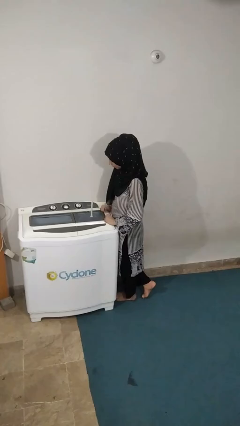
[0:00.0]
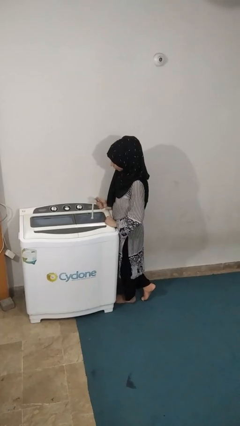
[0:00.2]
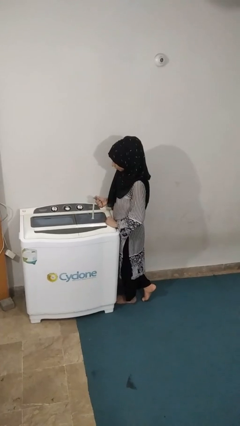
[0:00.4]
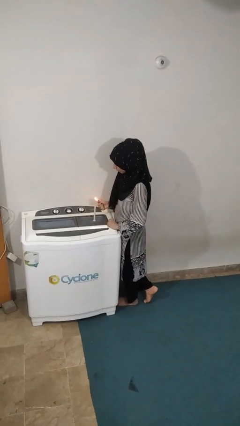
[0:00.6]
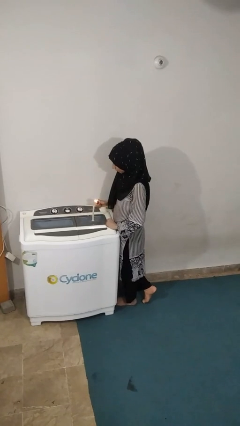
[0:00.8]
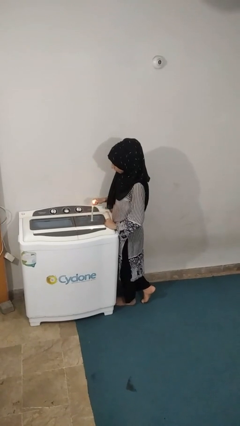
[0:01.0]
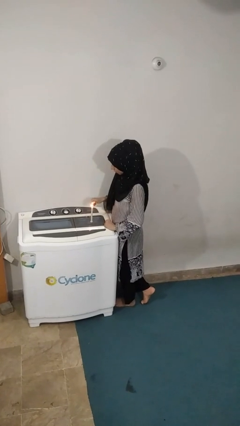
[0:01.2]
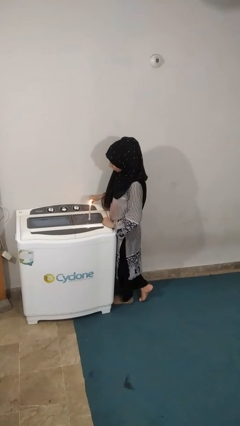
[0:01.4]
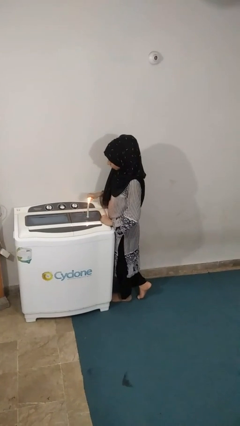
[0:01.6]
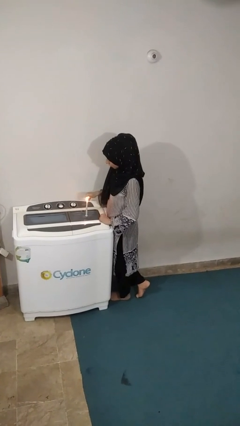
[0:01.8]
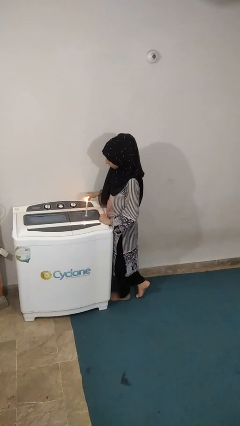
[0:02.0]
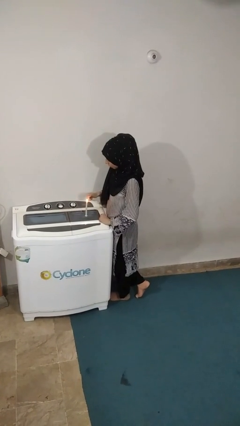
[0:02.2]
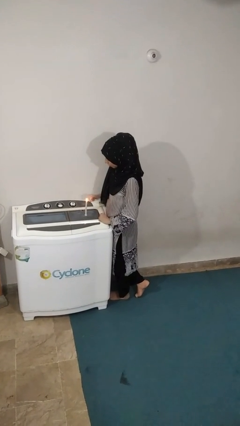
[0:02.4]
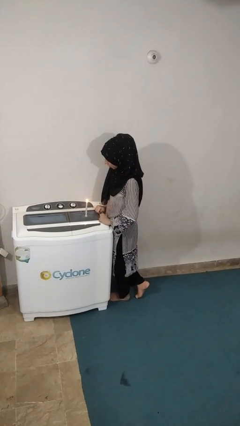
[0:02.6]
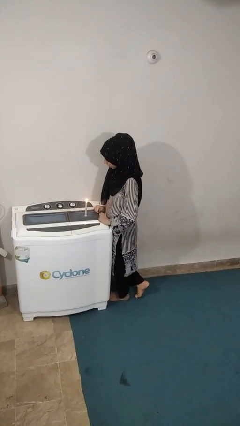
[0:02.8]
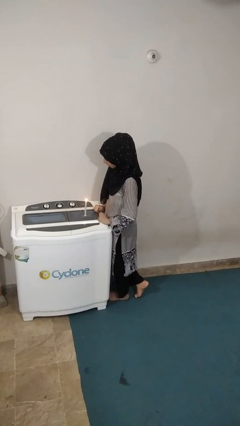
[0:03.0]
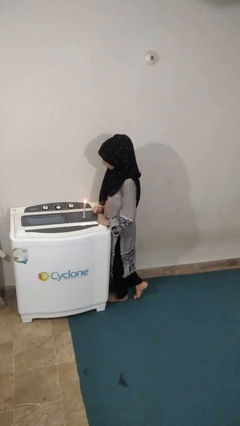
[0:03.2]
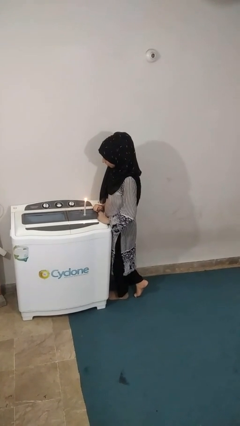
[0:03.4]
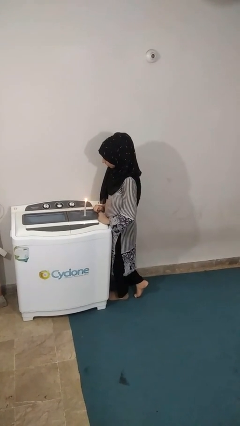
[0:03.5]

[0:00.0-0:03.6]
person lights candle

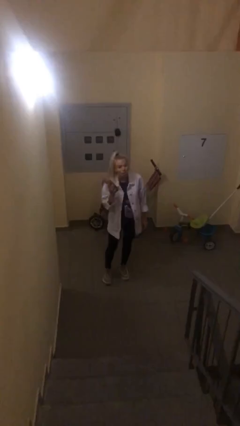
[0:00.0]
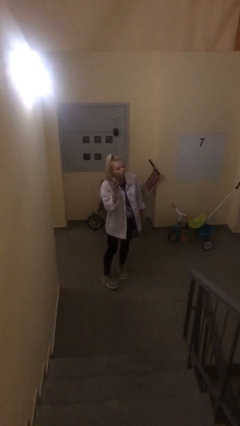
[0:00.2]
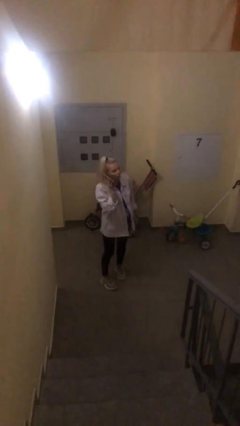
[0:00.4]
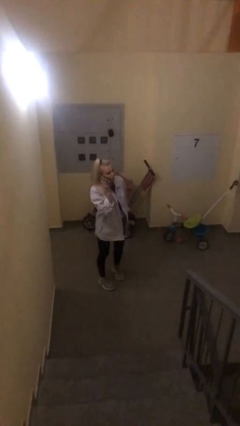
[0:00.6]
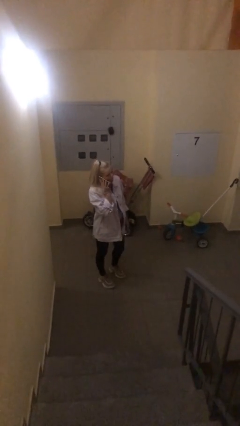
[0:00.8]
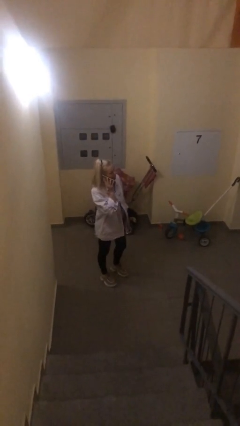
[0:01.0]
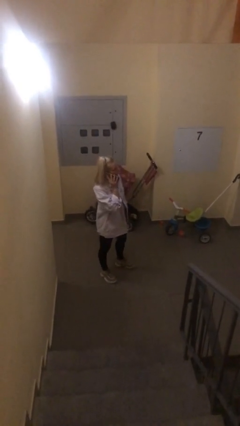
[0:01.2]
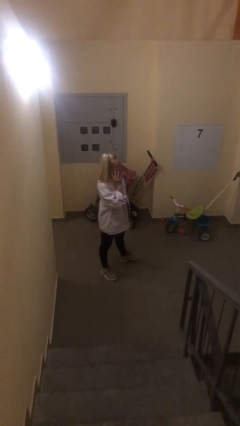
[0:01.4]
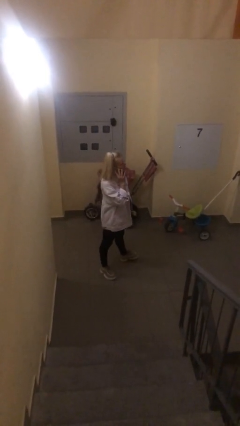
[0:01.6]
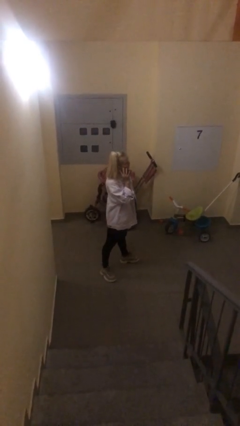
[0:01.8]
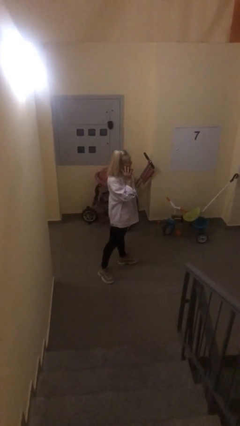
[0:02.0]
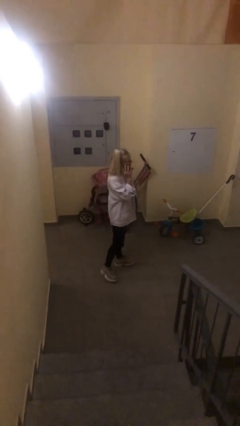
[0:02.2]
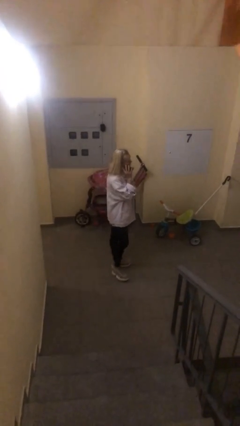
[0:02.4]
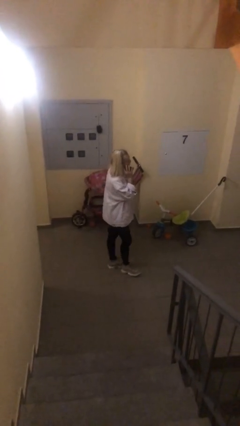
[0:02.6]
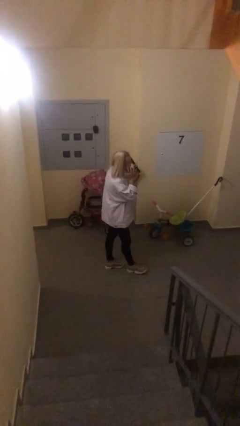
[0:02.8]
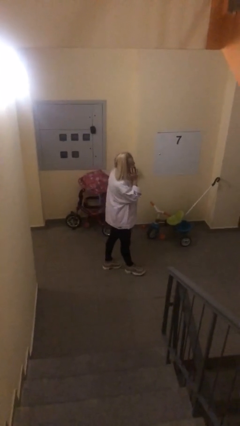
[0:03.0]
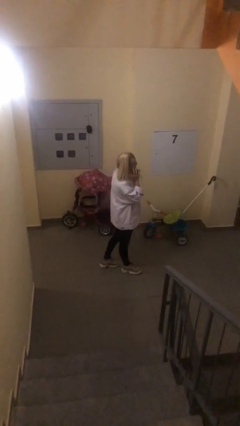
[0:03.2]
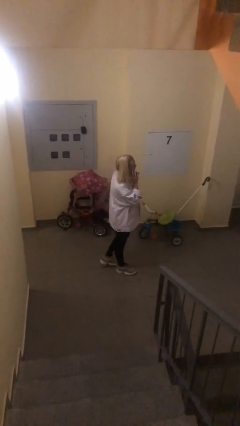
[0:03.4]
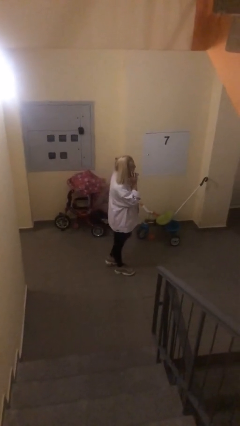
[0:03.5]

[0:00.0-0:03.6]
person talks on phone

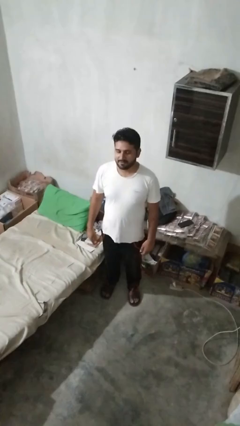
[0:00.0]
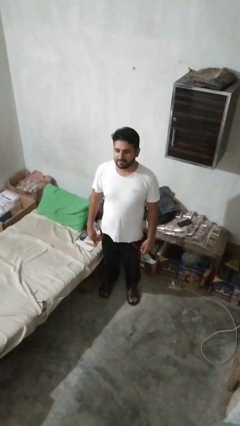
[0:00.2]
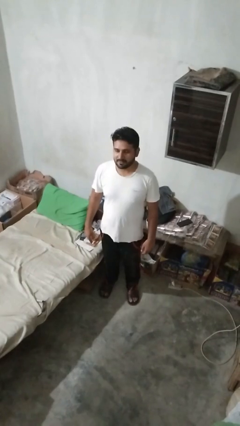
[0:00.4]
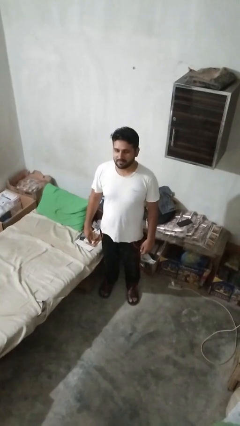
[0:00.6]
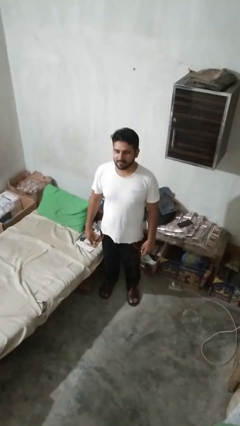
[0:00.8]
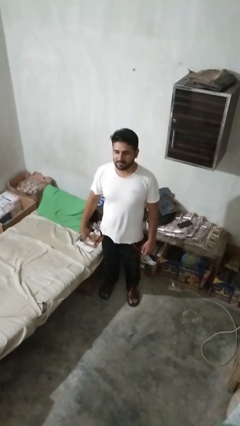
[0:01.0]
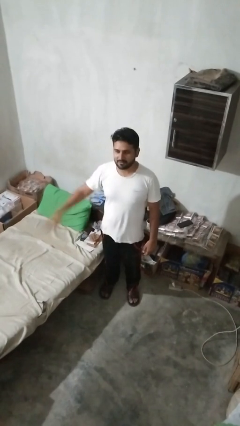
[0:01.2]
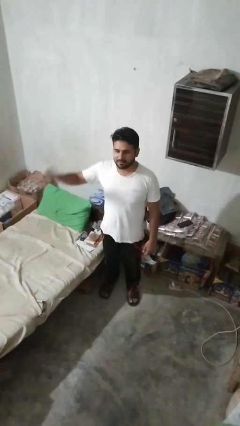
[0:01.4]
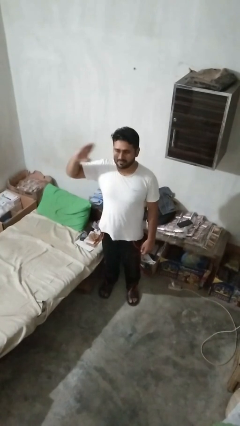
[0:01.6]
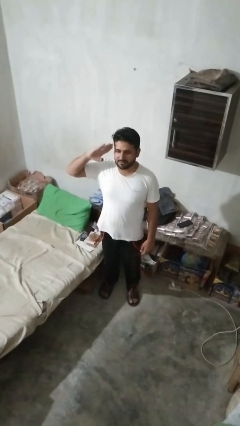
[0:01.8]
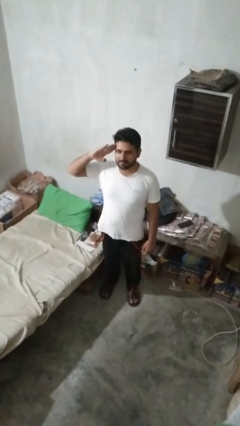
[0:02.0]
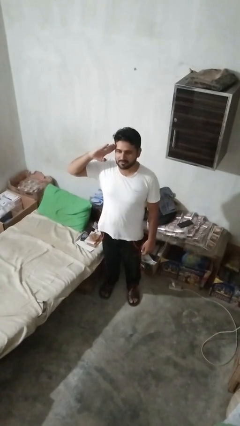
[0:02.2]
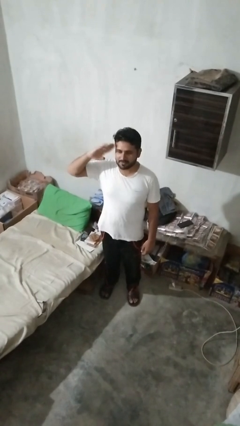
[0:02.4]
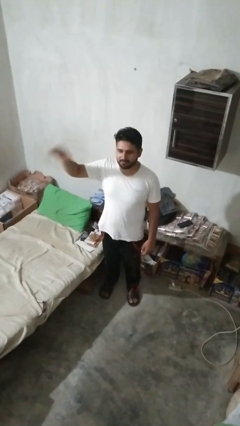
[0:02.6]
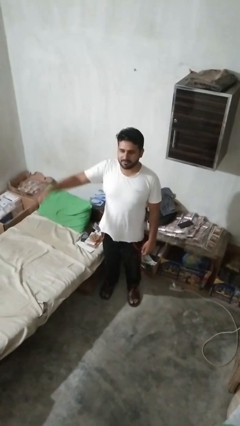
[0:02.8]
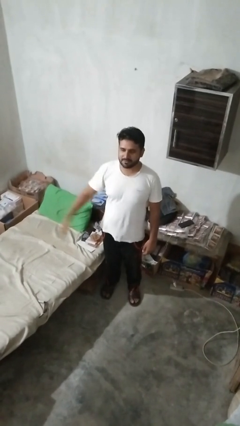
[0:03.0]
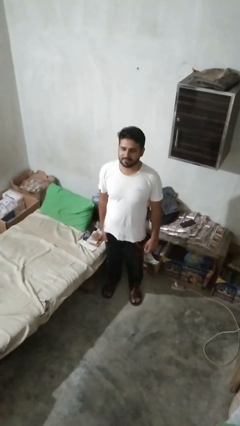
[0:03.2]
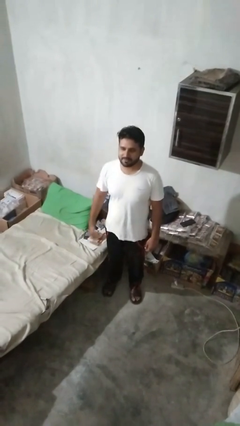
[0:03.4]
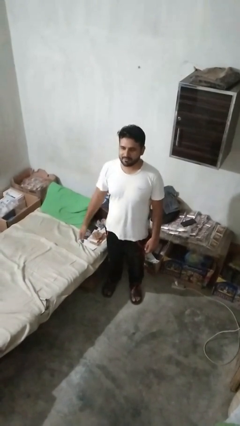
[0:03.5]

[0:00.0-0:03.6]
person salutes

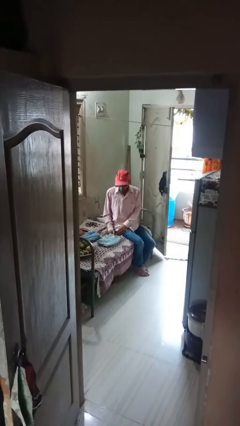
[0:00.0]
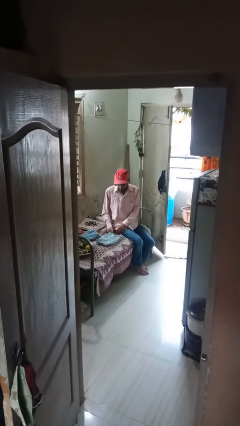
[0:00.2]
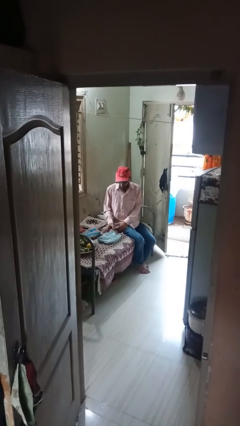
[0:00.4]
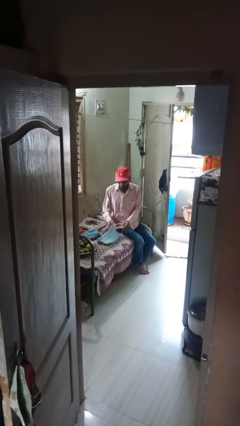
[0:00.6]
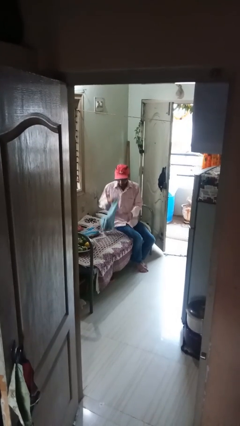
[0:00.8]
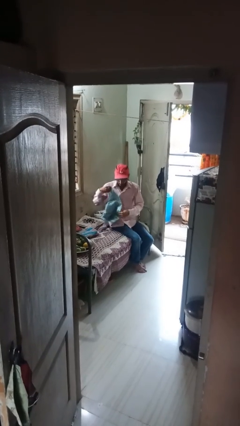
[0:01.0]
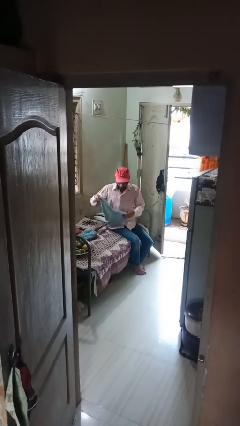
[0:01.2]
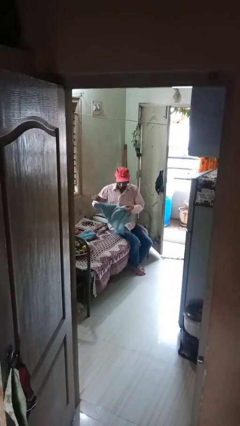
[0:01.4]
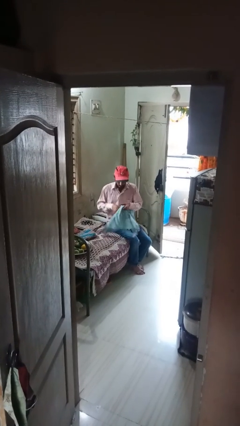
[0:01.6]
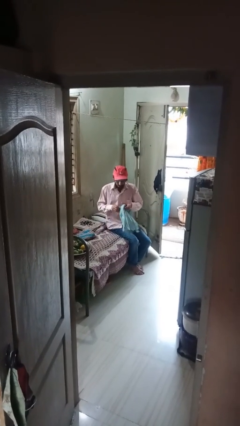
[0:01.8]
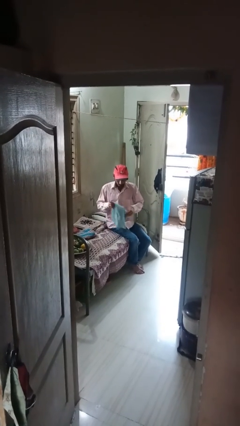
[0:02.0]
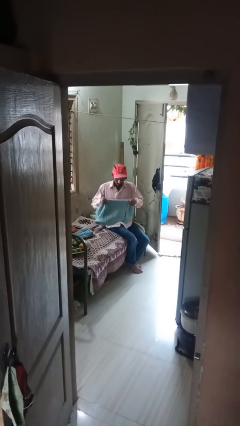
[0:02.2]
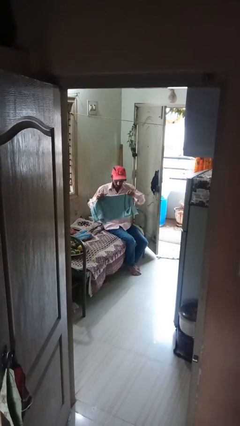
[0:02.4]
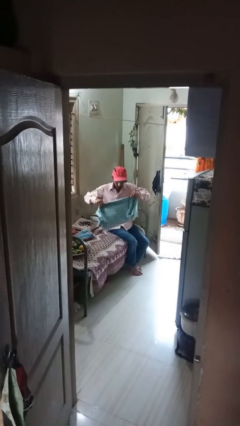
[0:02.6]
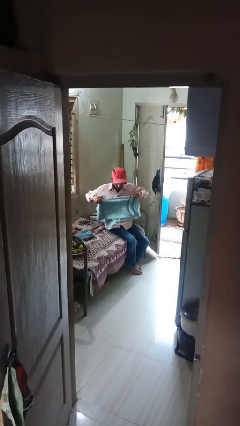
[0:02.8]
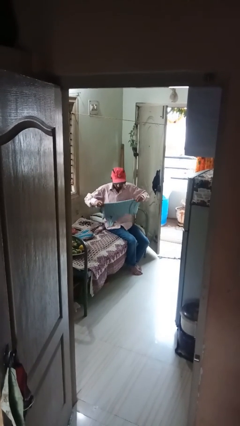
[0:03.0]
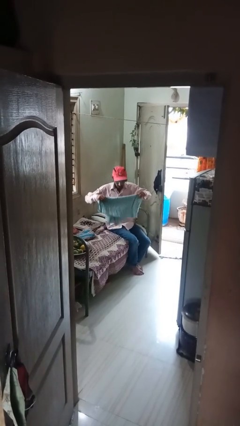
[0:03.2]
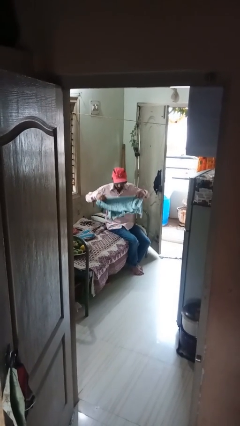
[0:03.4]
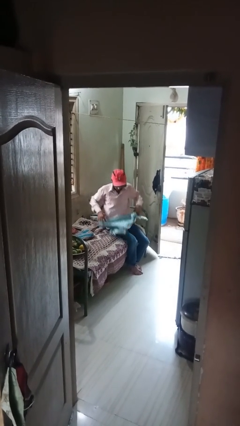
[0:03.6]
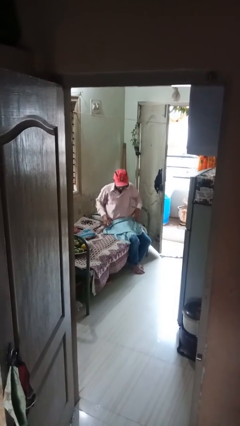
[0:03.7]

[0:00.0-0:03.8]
person folds towel

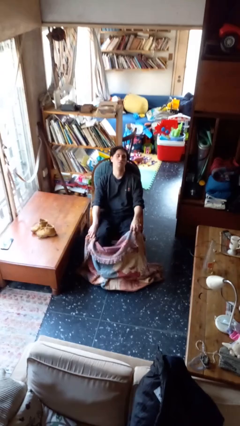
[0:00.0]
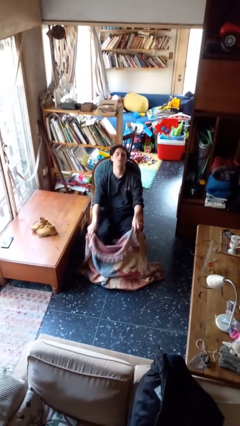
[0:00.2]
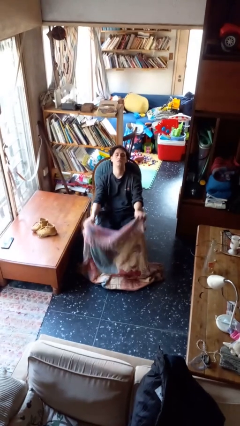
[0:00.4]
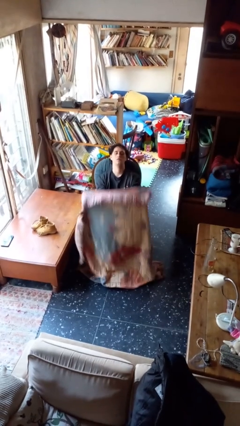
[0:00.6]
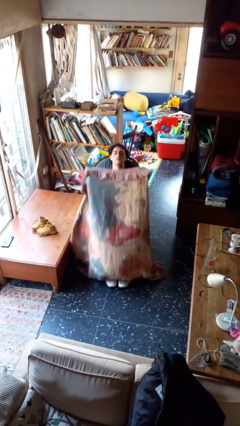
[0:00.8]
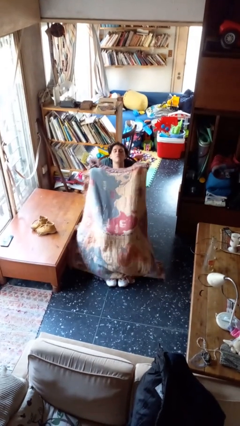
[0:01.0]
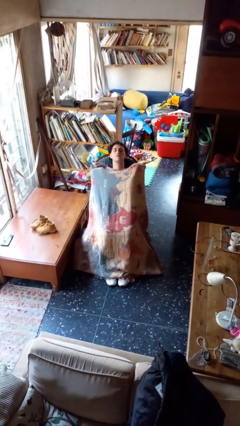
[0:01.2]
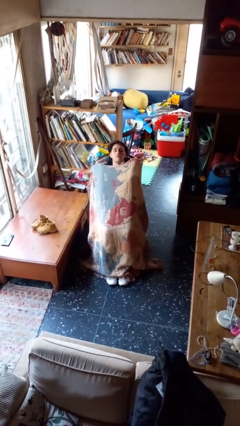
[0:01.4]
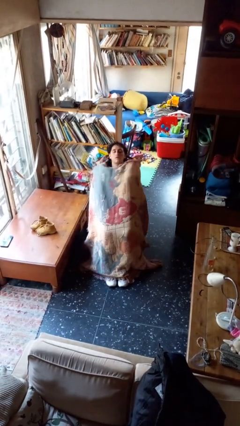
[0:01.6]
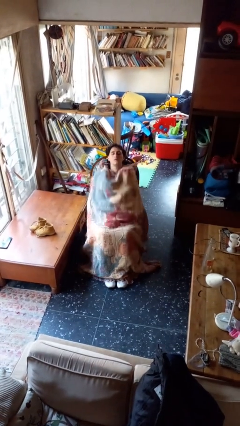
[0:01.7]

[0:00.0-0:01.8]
person covers with blanket

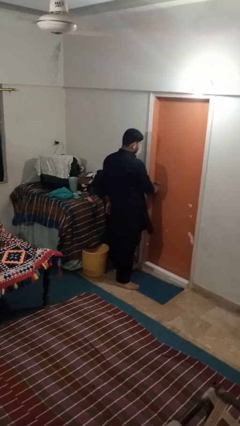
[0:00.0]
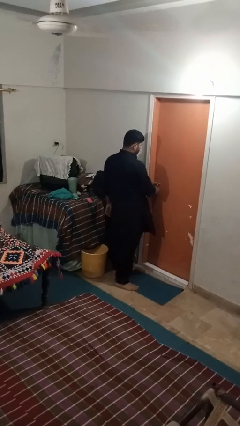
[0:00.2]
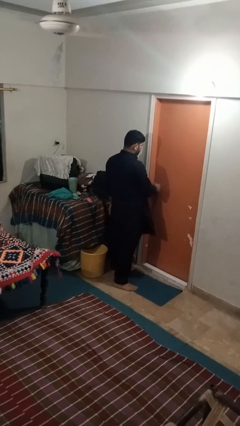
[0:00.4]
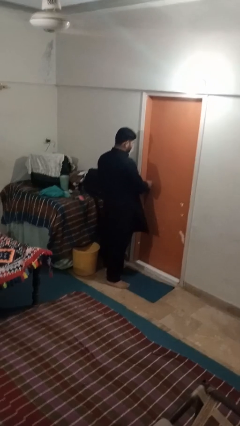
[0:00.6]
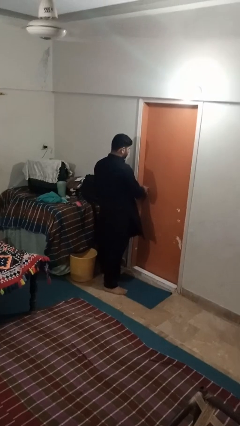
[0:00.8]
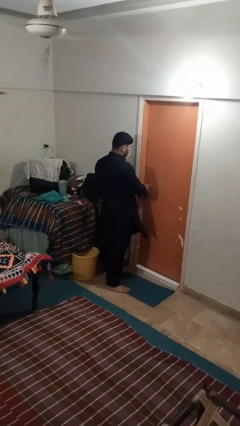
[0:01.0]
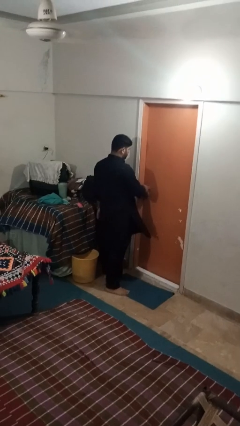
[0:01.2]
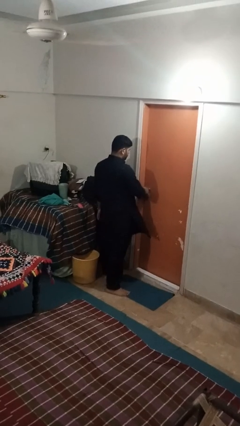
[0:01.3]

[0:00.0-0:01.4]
person locks door with keys
